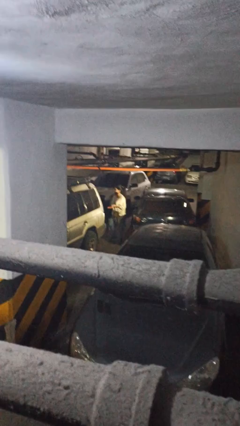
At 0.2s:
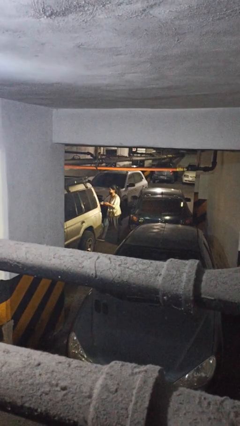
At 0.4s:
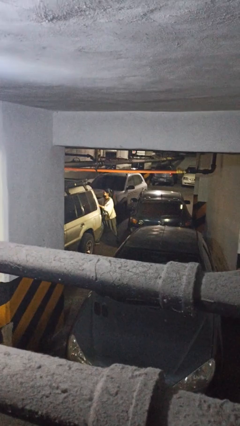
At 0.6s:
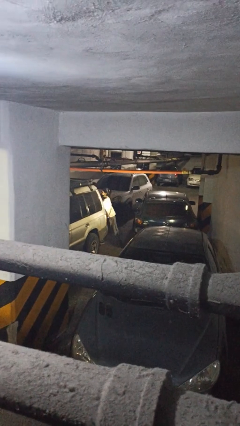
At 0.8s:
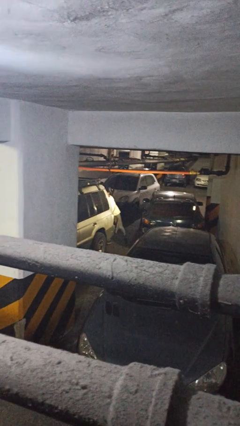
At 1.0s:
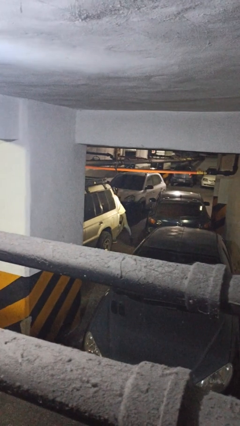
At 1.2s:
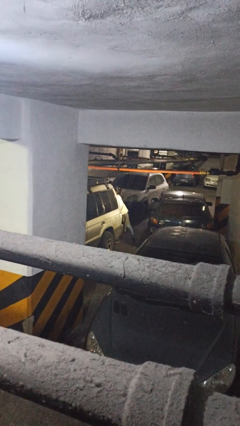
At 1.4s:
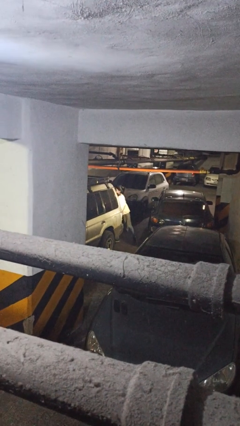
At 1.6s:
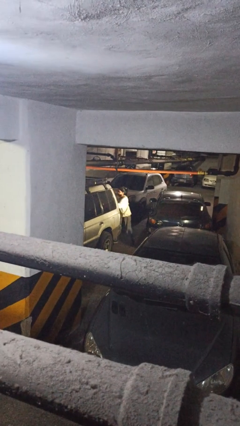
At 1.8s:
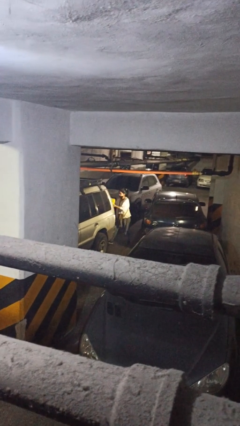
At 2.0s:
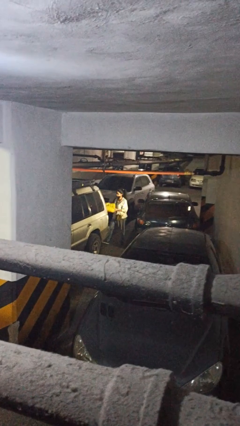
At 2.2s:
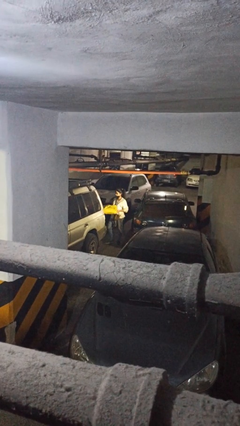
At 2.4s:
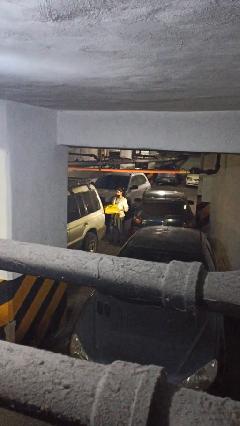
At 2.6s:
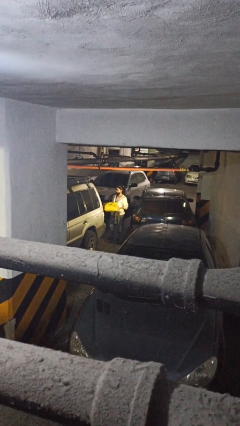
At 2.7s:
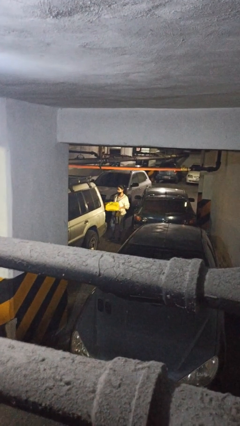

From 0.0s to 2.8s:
person unloads car

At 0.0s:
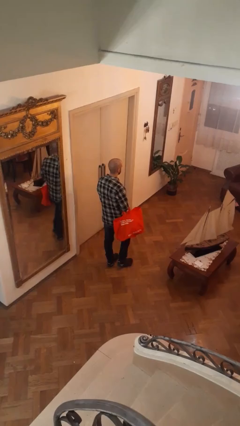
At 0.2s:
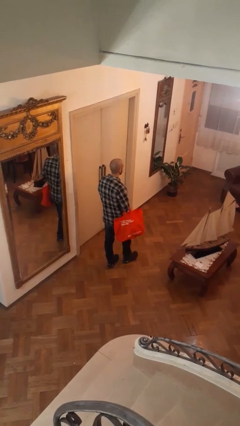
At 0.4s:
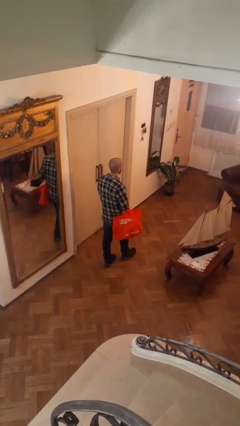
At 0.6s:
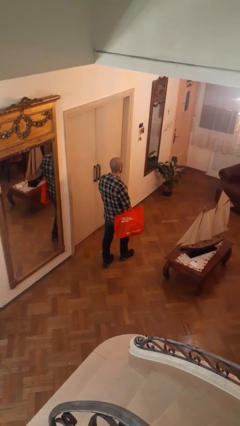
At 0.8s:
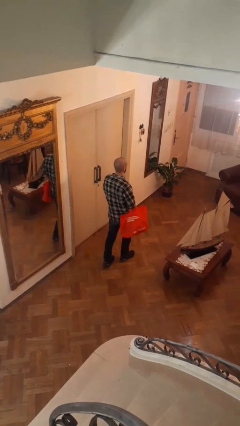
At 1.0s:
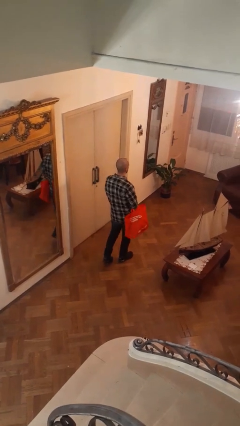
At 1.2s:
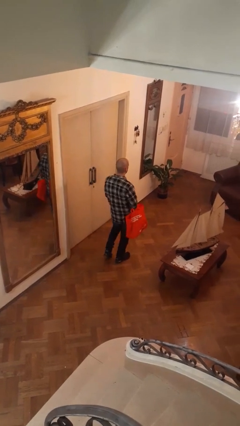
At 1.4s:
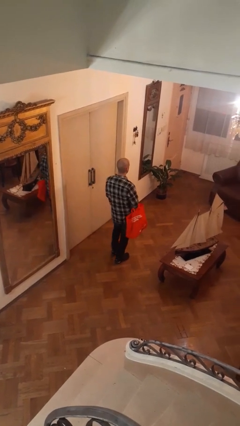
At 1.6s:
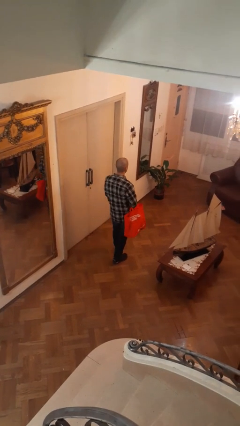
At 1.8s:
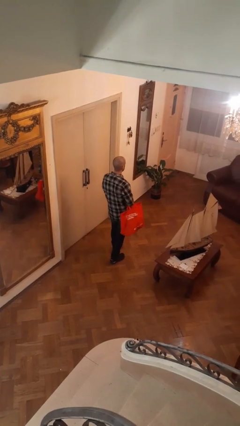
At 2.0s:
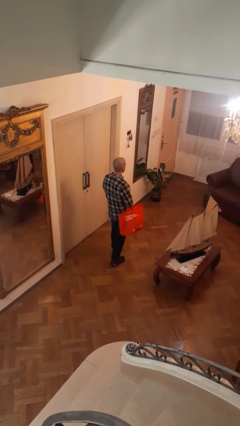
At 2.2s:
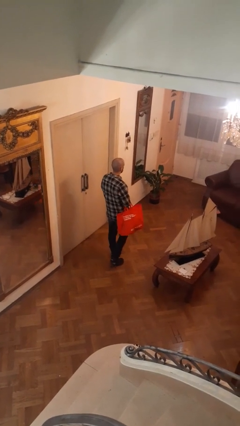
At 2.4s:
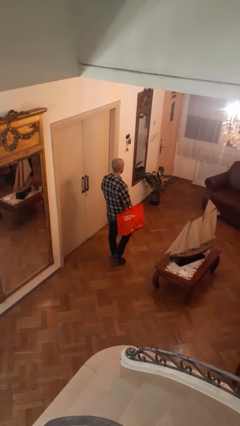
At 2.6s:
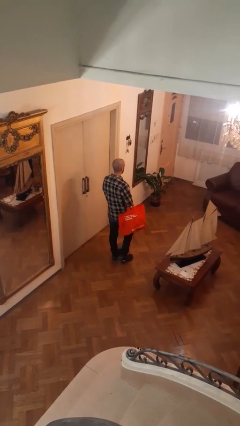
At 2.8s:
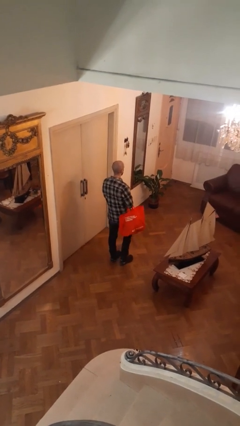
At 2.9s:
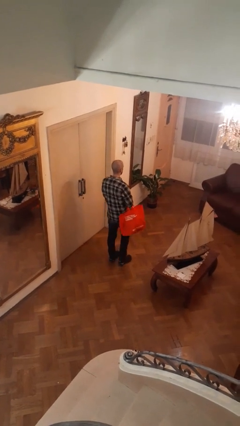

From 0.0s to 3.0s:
person carries groceries

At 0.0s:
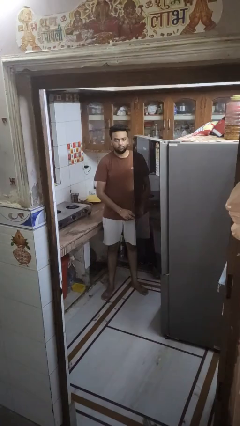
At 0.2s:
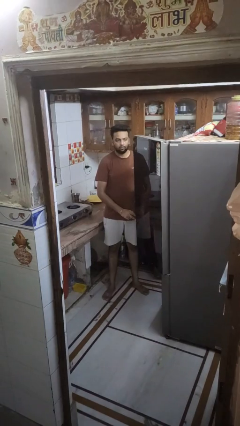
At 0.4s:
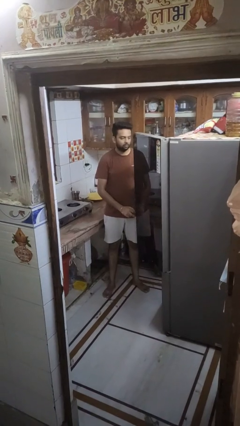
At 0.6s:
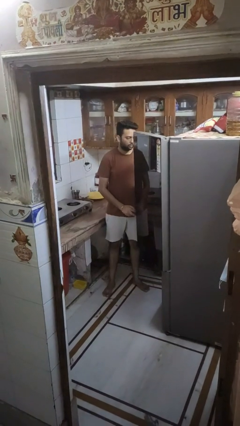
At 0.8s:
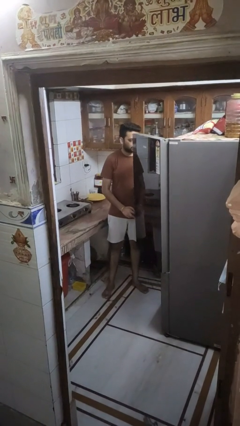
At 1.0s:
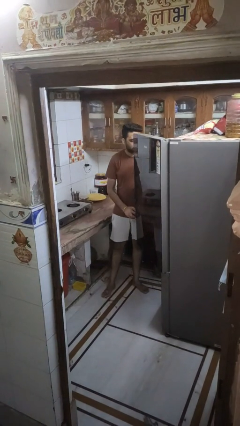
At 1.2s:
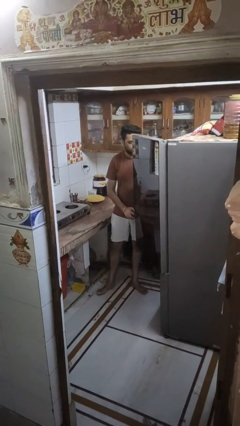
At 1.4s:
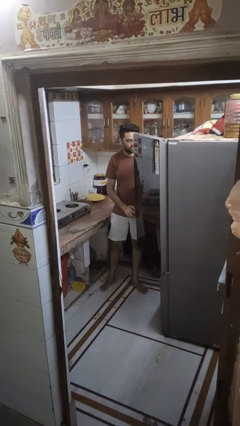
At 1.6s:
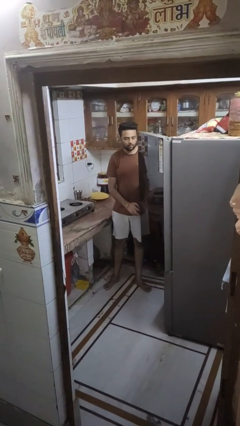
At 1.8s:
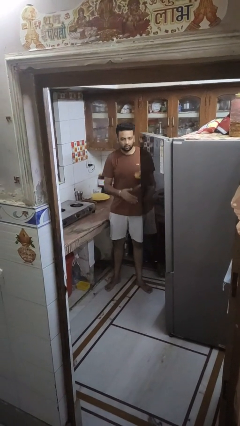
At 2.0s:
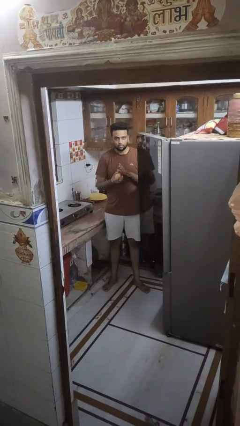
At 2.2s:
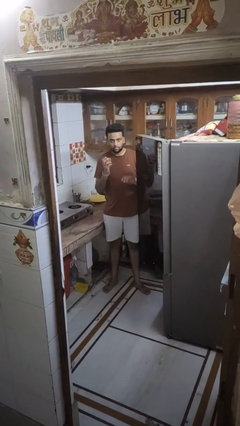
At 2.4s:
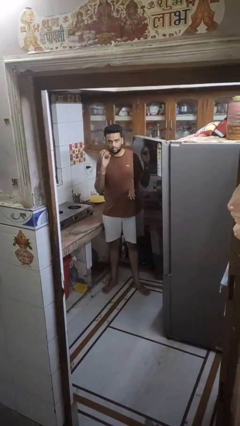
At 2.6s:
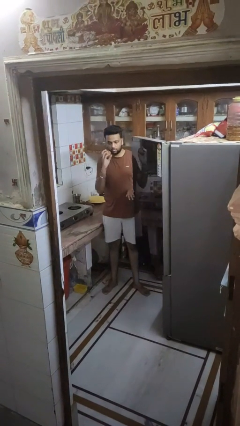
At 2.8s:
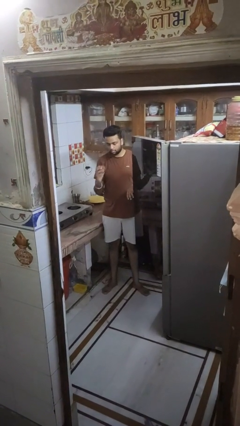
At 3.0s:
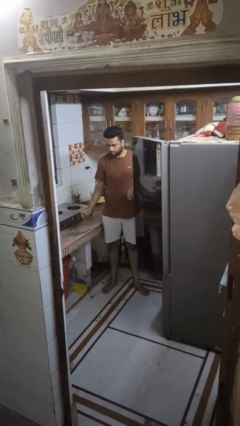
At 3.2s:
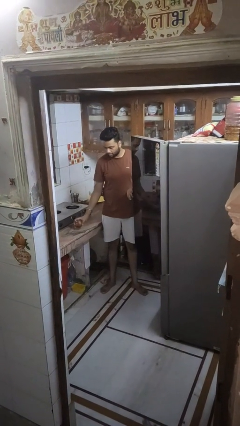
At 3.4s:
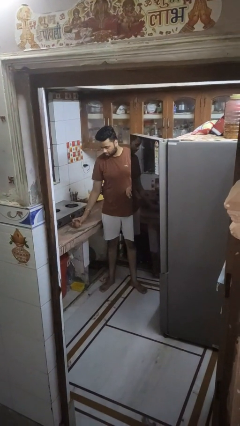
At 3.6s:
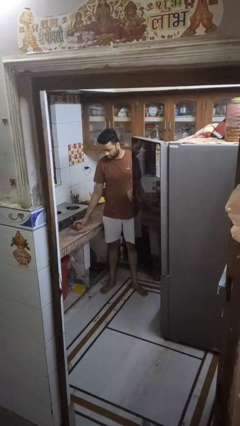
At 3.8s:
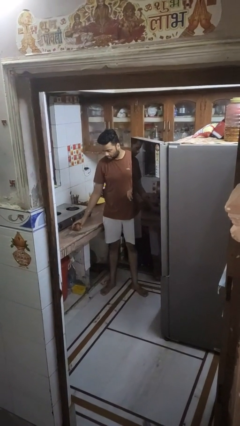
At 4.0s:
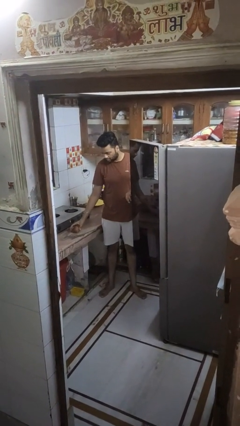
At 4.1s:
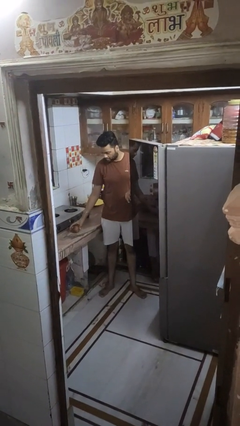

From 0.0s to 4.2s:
person takes object from refrigerator

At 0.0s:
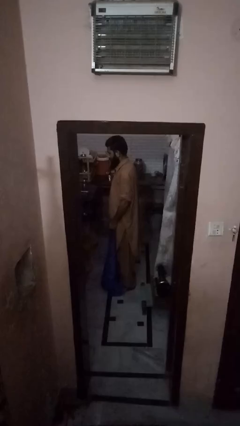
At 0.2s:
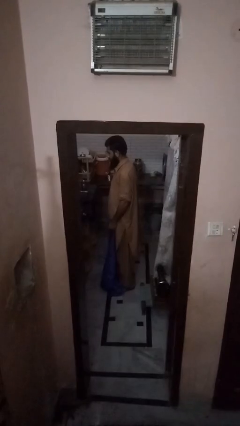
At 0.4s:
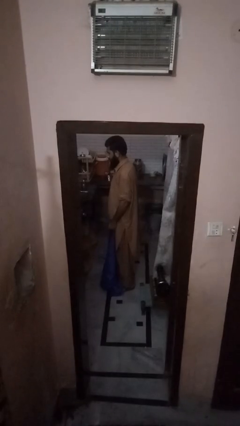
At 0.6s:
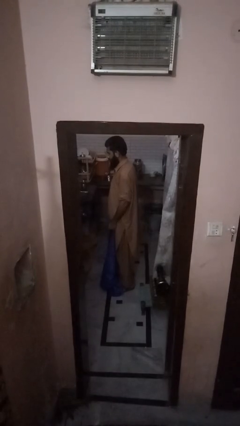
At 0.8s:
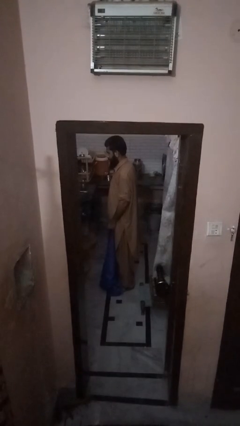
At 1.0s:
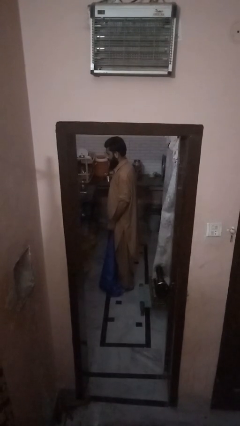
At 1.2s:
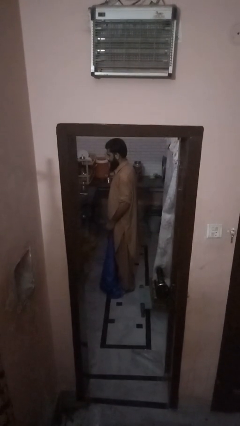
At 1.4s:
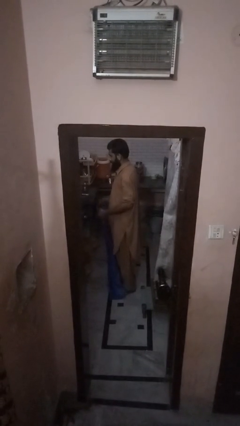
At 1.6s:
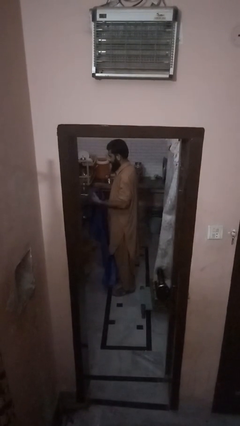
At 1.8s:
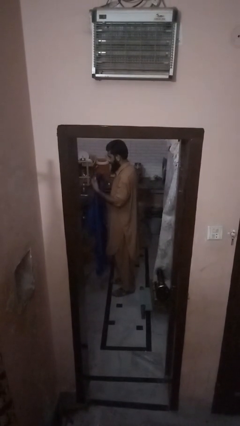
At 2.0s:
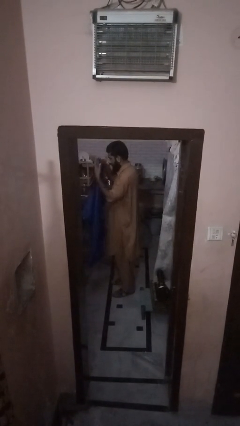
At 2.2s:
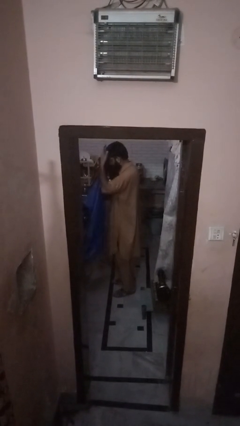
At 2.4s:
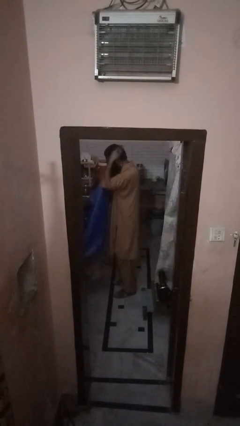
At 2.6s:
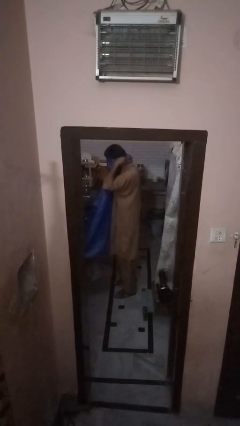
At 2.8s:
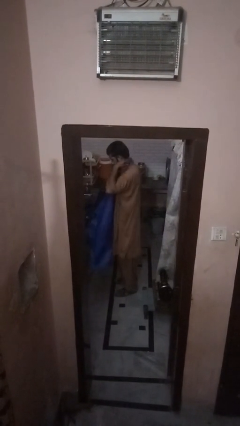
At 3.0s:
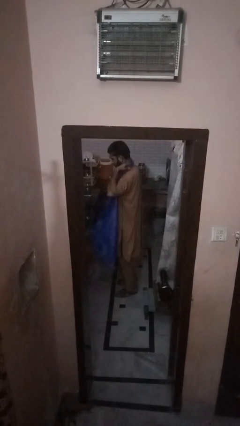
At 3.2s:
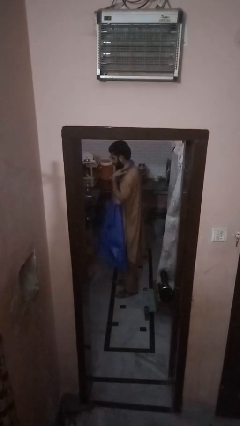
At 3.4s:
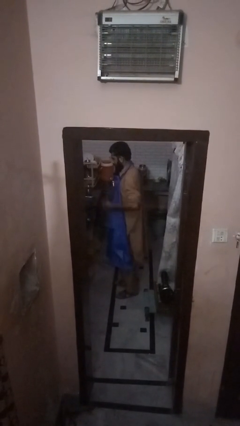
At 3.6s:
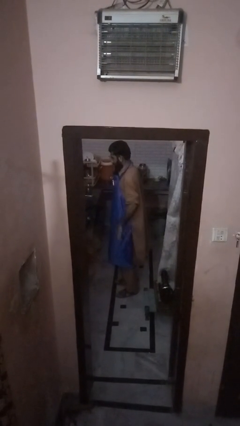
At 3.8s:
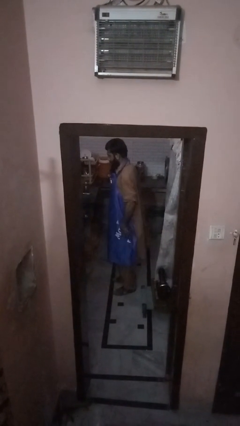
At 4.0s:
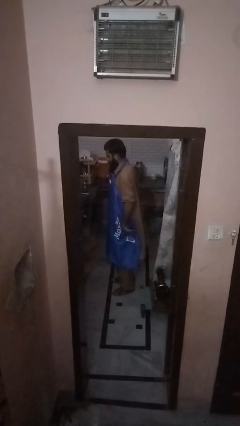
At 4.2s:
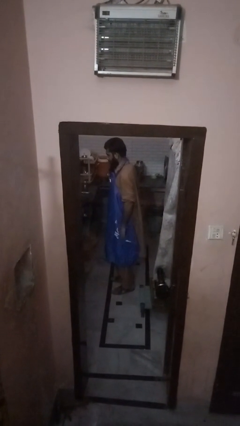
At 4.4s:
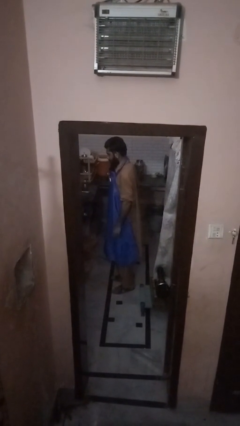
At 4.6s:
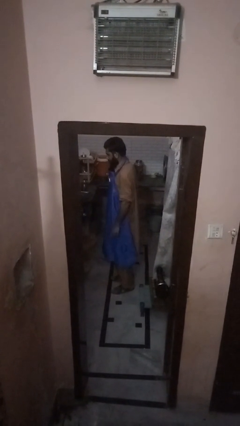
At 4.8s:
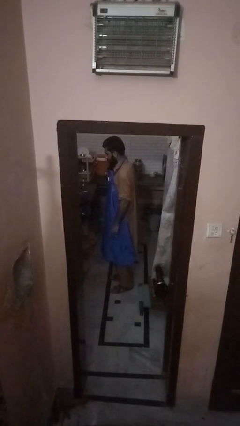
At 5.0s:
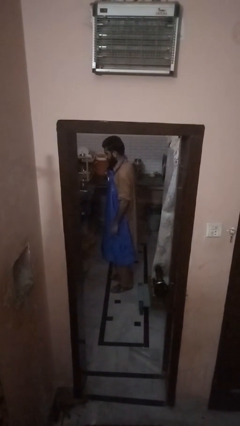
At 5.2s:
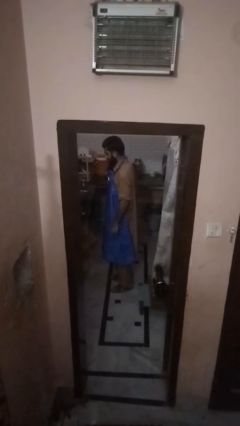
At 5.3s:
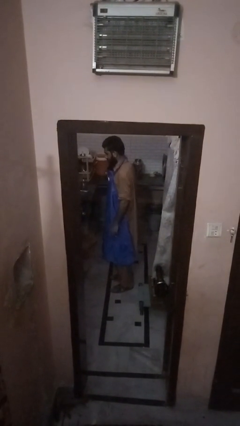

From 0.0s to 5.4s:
person puts on apron

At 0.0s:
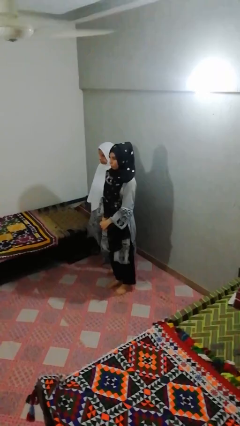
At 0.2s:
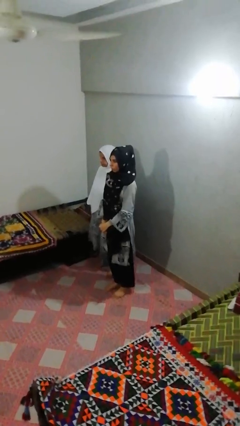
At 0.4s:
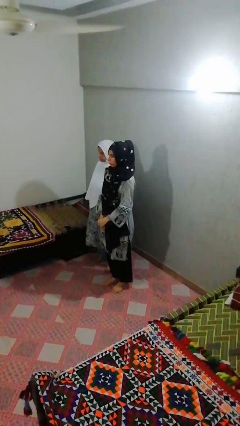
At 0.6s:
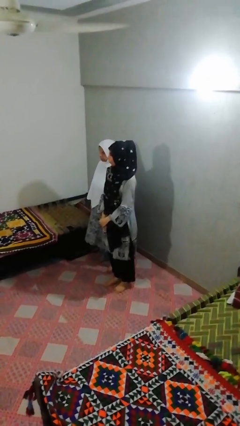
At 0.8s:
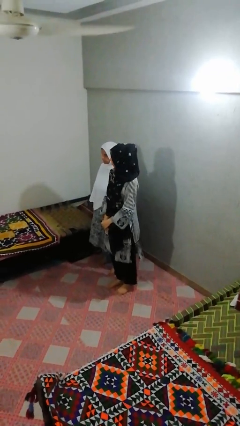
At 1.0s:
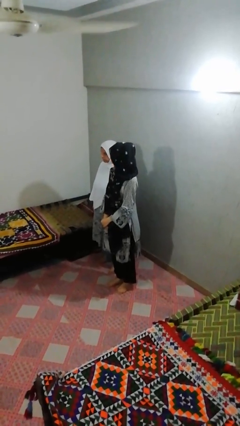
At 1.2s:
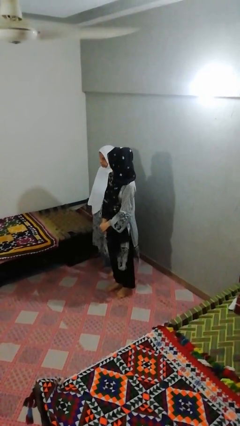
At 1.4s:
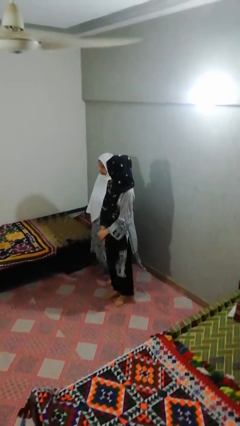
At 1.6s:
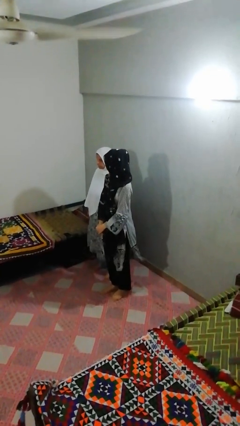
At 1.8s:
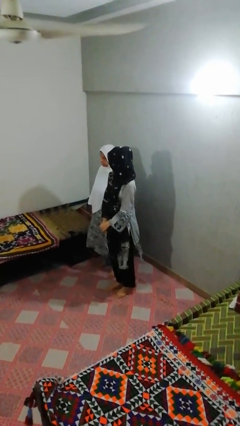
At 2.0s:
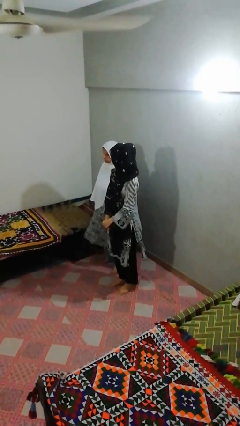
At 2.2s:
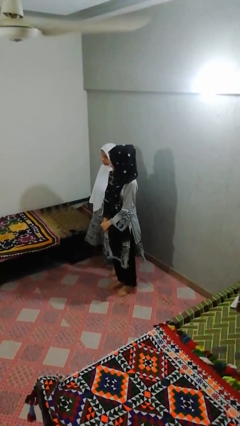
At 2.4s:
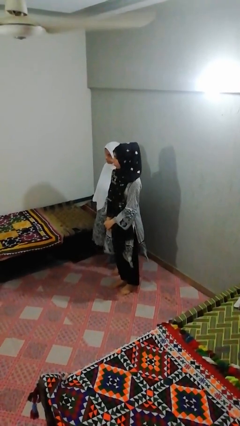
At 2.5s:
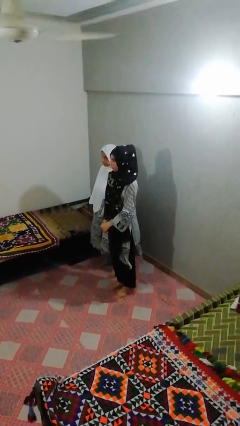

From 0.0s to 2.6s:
person looks over shoulder
